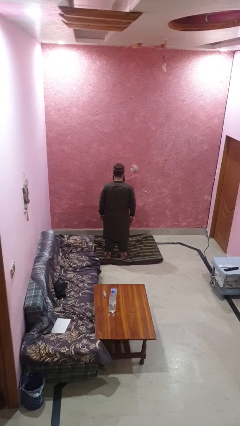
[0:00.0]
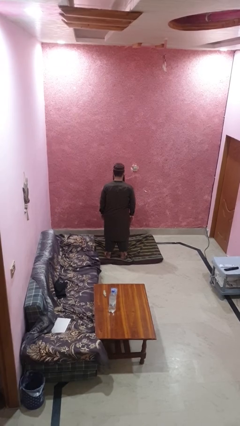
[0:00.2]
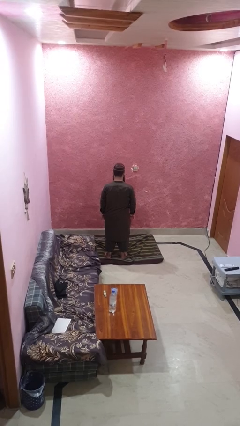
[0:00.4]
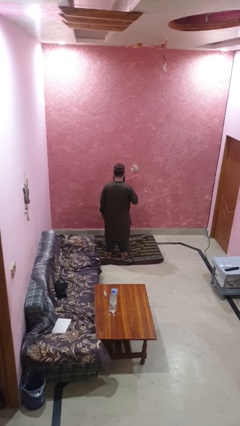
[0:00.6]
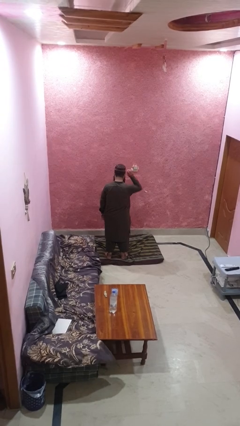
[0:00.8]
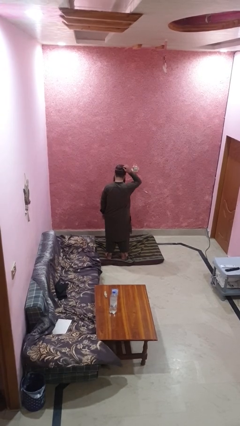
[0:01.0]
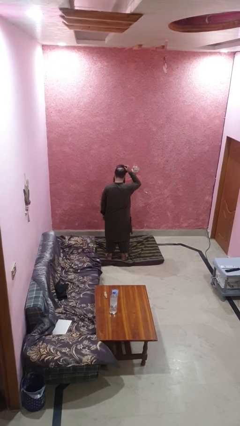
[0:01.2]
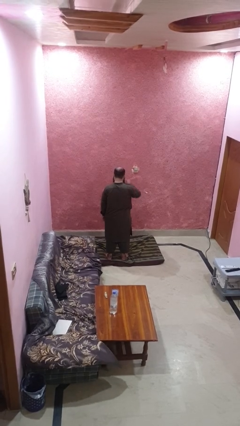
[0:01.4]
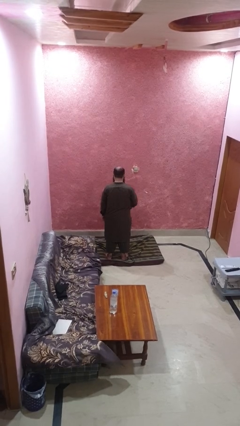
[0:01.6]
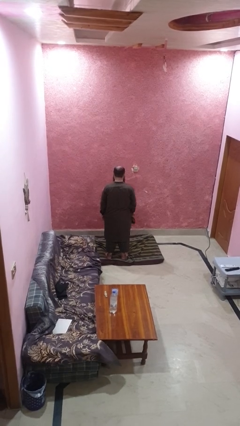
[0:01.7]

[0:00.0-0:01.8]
person takes off hat

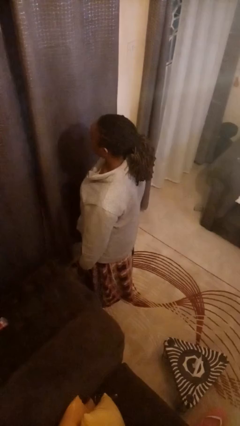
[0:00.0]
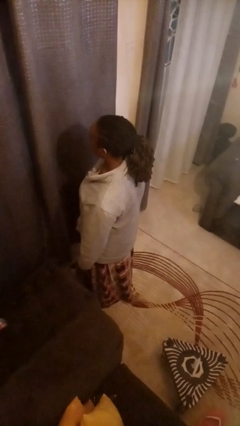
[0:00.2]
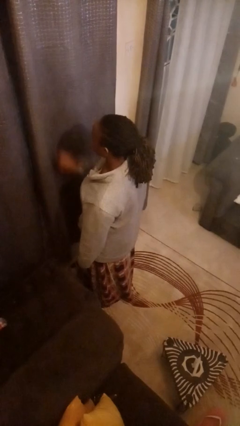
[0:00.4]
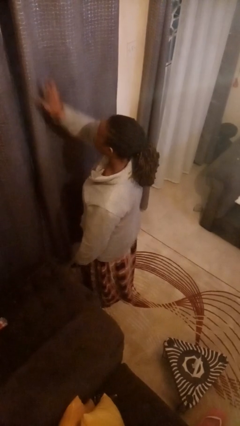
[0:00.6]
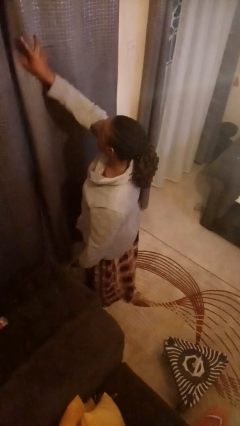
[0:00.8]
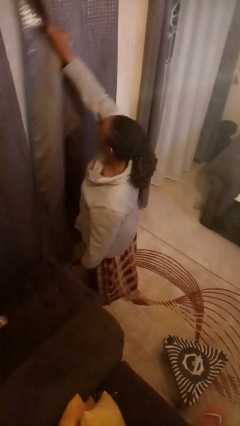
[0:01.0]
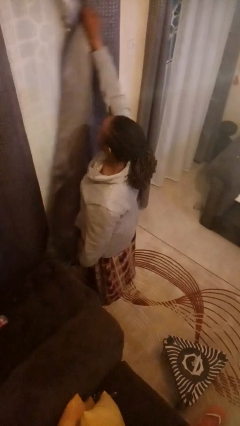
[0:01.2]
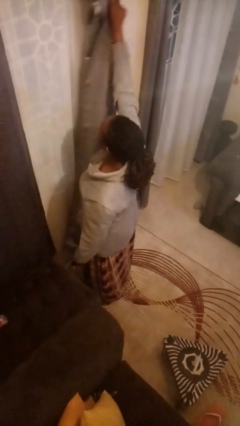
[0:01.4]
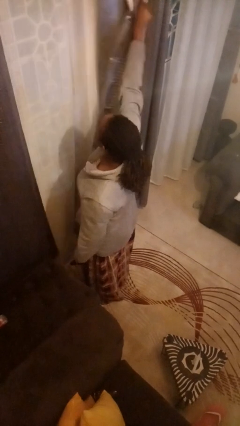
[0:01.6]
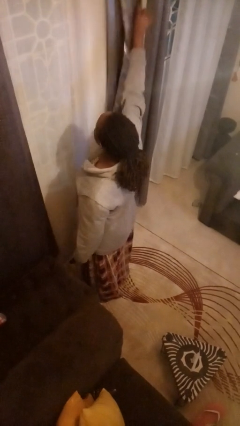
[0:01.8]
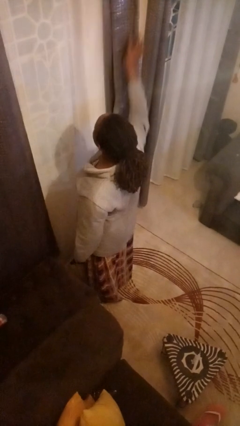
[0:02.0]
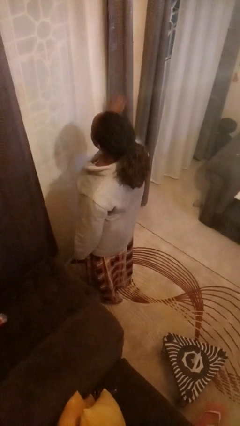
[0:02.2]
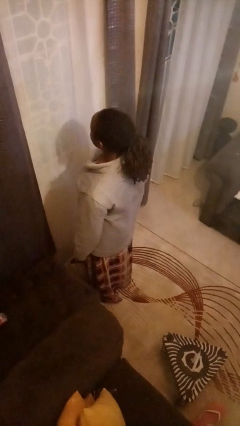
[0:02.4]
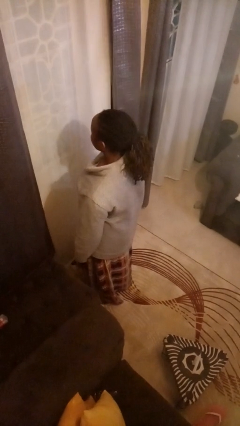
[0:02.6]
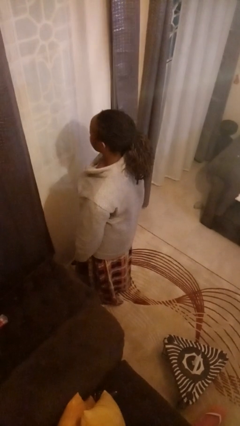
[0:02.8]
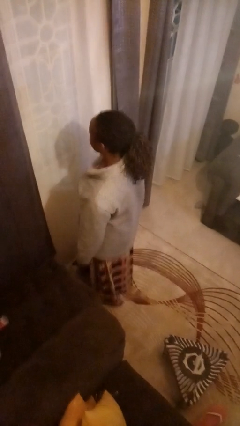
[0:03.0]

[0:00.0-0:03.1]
person opens curtains

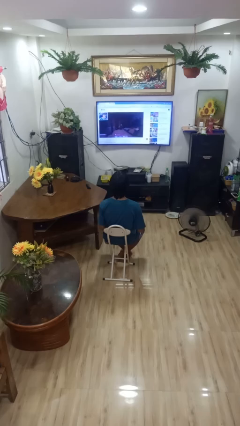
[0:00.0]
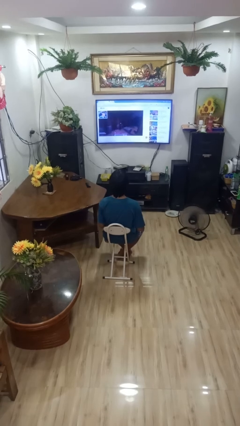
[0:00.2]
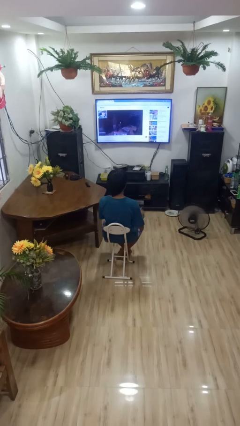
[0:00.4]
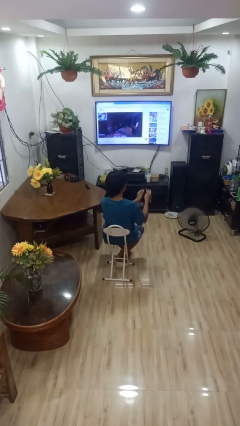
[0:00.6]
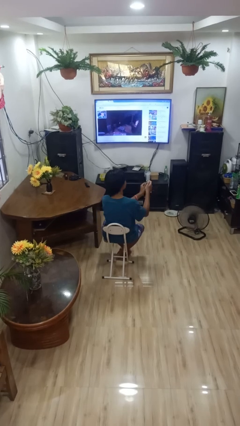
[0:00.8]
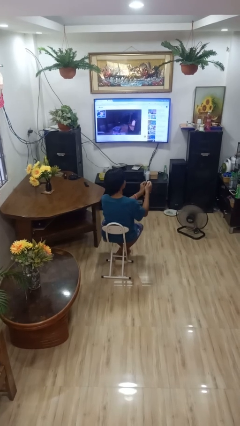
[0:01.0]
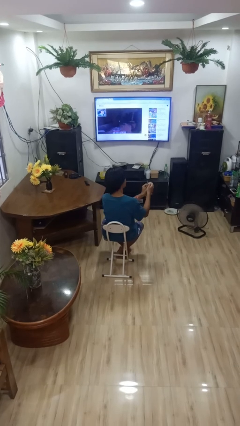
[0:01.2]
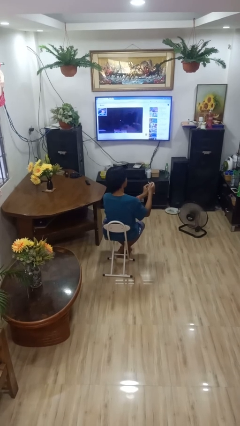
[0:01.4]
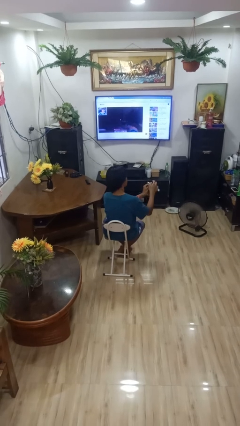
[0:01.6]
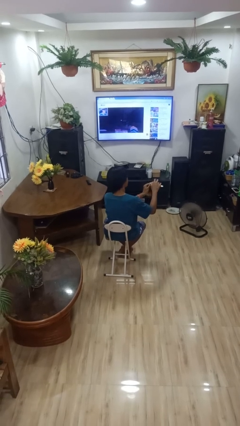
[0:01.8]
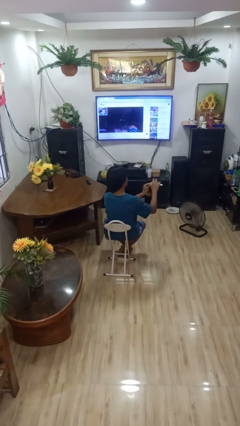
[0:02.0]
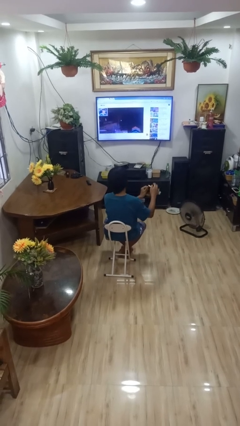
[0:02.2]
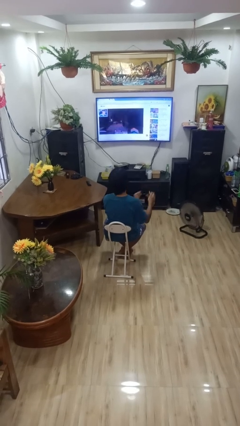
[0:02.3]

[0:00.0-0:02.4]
person files fingernails

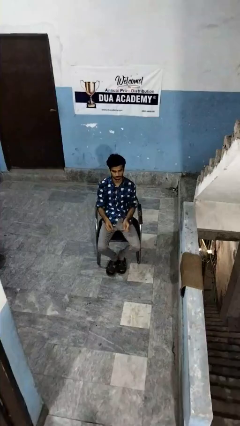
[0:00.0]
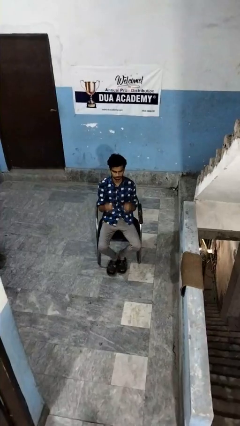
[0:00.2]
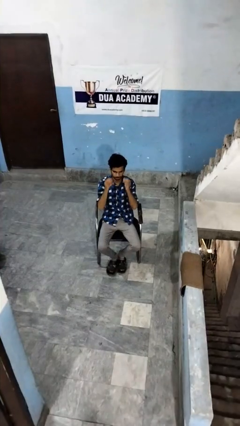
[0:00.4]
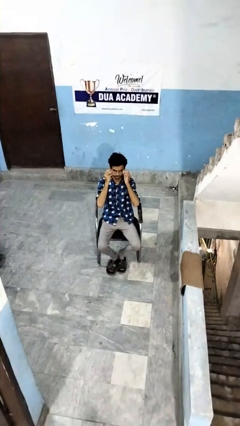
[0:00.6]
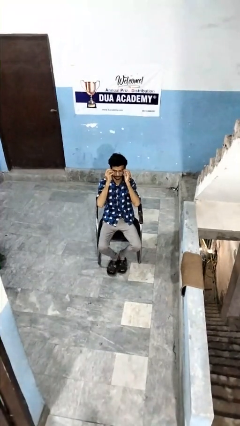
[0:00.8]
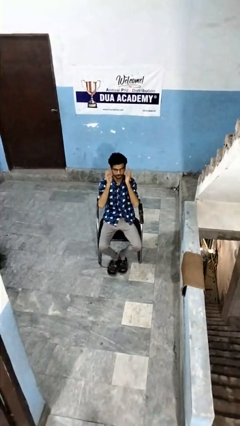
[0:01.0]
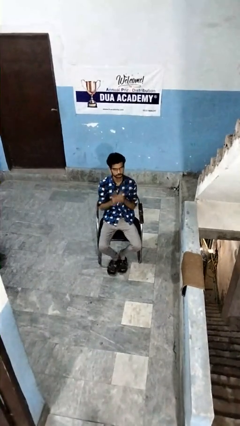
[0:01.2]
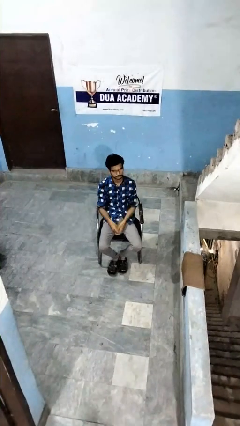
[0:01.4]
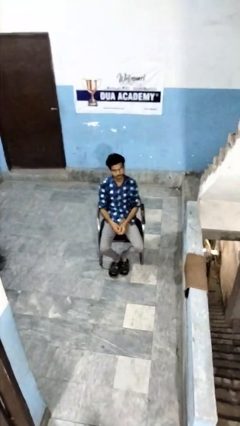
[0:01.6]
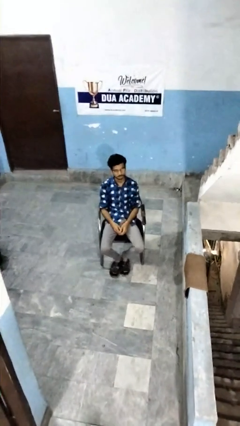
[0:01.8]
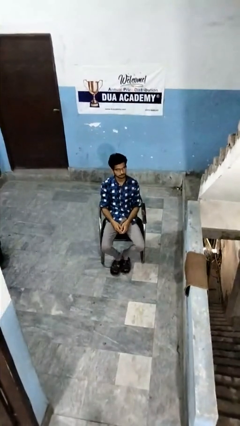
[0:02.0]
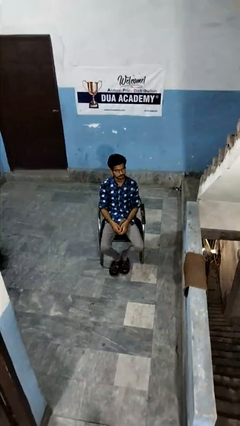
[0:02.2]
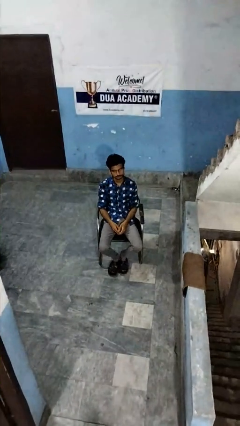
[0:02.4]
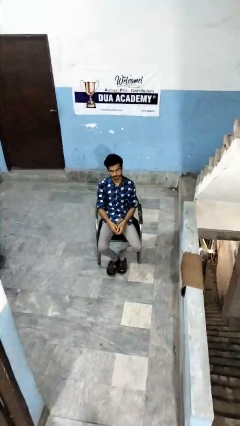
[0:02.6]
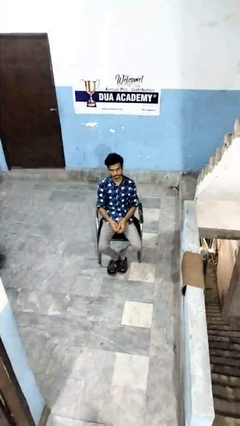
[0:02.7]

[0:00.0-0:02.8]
person puts on glasses

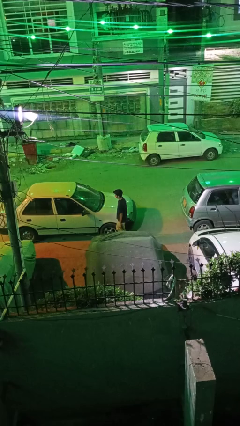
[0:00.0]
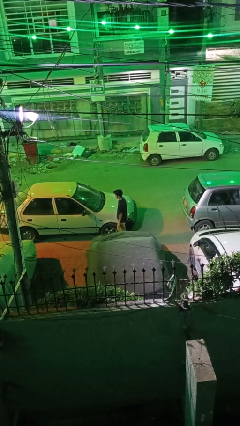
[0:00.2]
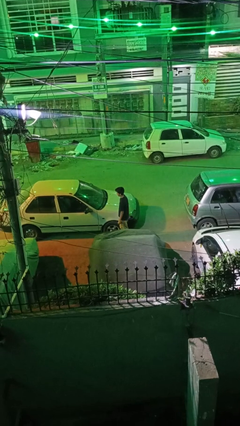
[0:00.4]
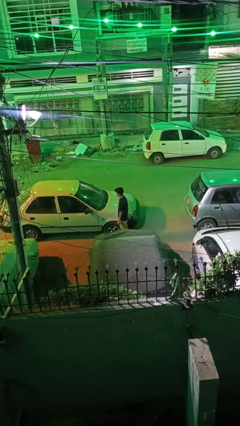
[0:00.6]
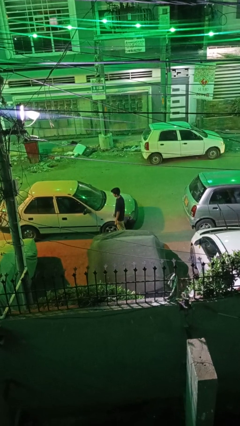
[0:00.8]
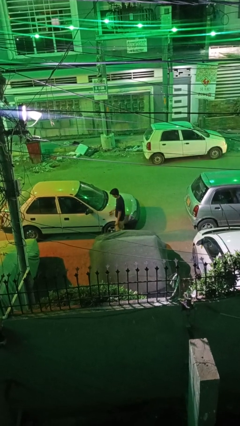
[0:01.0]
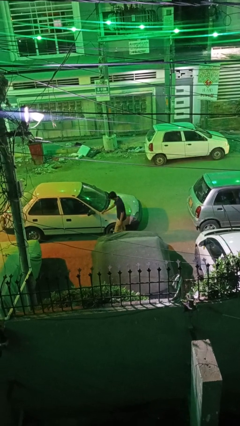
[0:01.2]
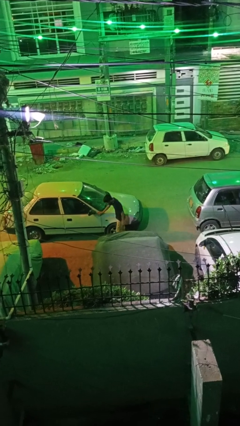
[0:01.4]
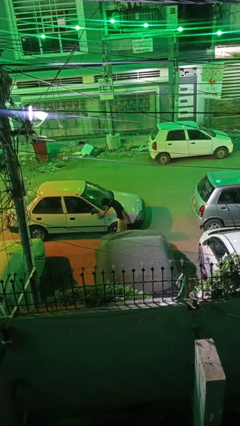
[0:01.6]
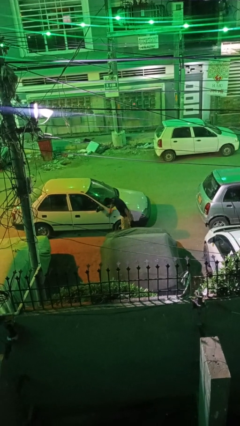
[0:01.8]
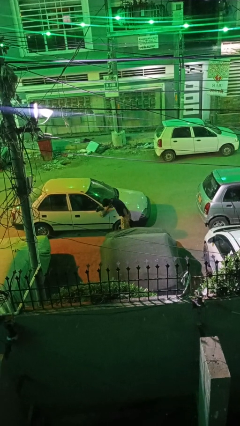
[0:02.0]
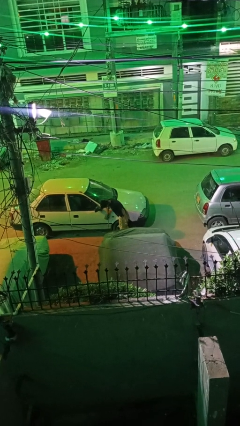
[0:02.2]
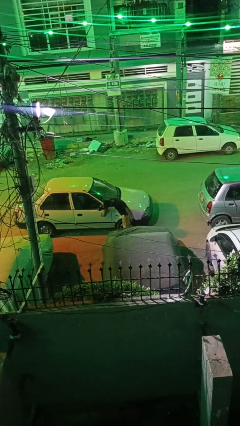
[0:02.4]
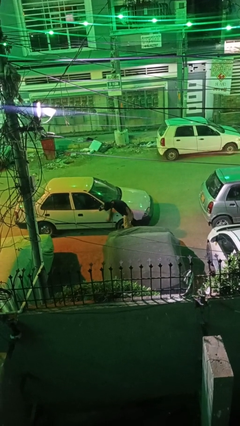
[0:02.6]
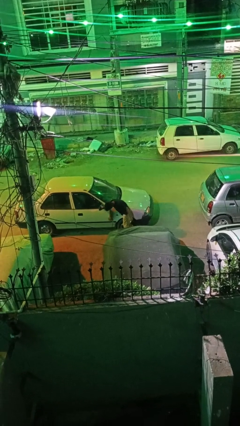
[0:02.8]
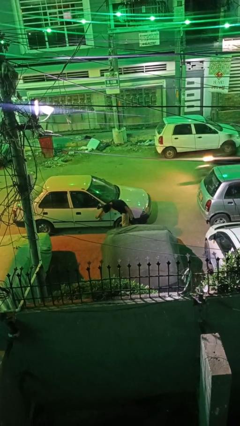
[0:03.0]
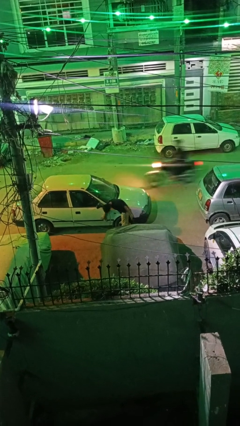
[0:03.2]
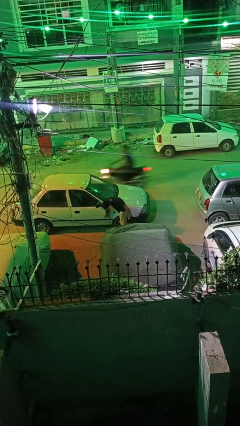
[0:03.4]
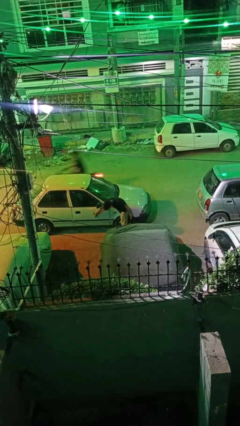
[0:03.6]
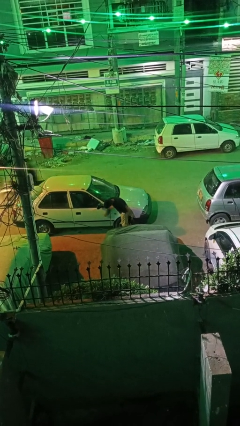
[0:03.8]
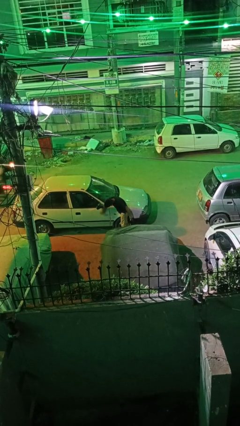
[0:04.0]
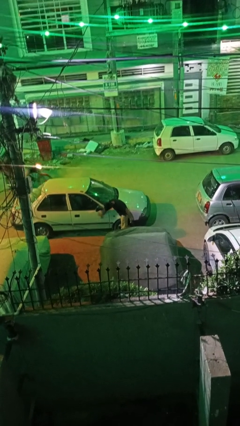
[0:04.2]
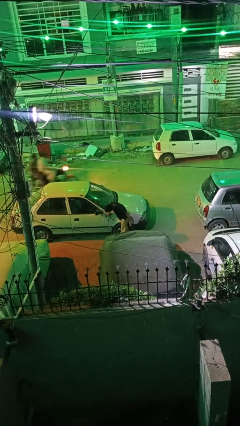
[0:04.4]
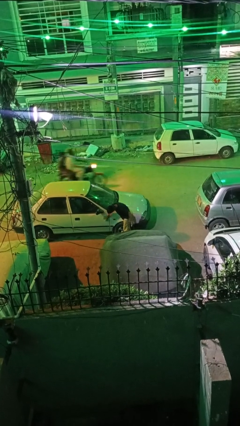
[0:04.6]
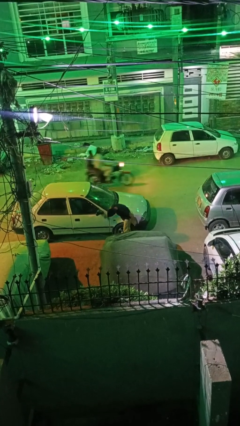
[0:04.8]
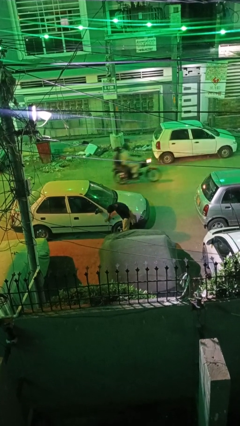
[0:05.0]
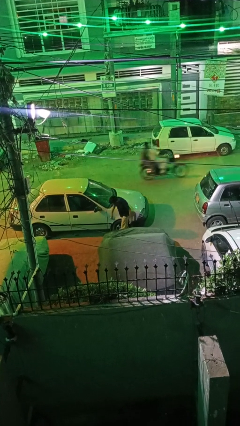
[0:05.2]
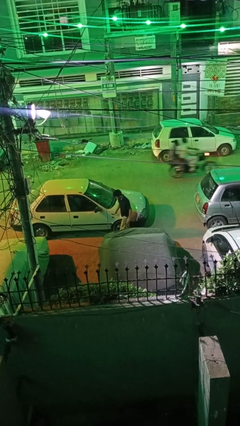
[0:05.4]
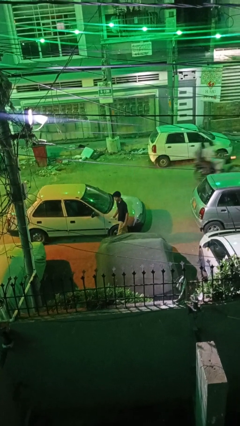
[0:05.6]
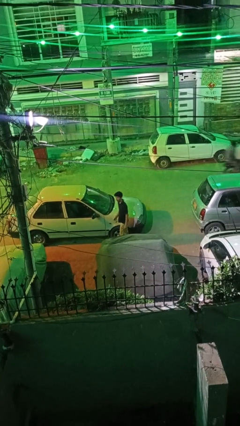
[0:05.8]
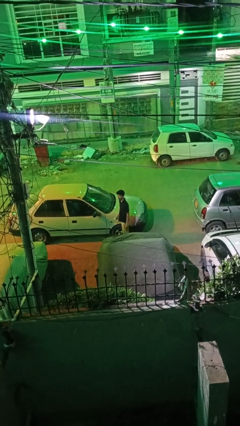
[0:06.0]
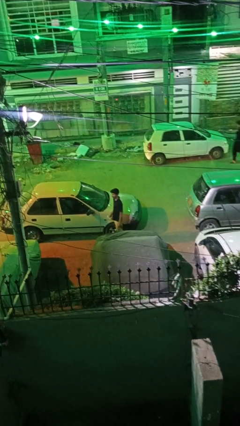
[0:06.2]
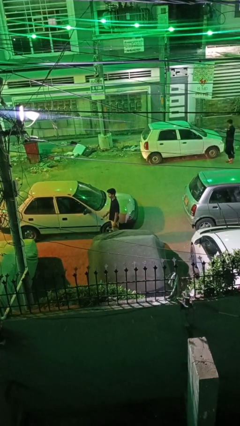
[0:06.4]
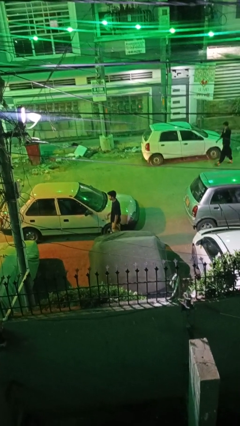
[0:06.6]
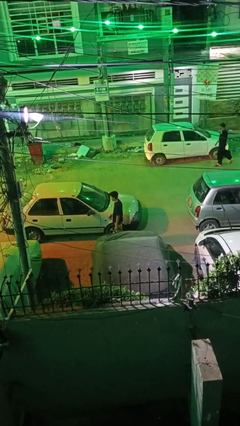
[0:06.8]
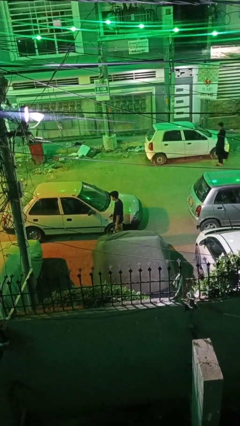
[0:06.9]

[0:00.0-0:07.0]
person polishes car with rag

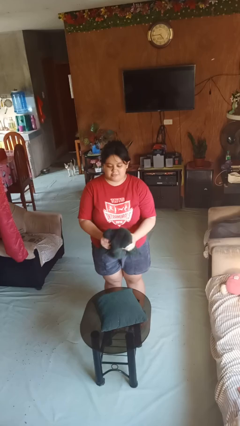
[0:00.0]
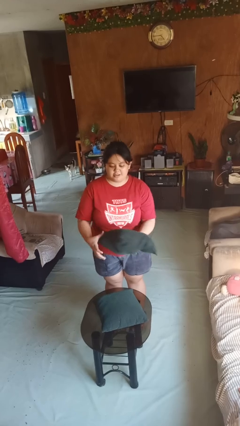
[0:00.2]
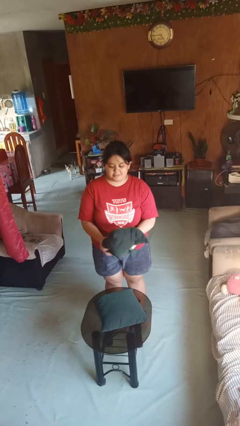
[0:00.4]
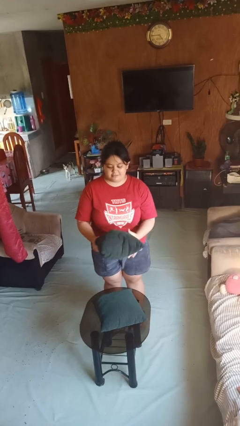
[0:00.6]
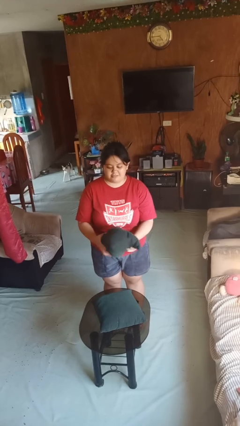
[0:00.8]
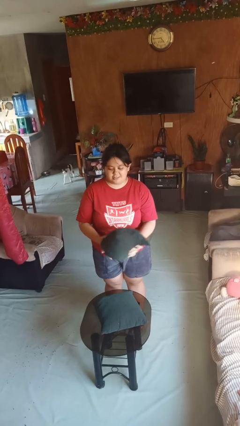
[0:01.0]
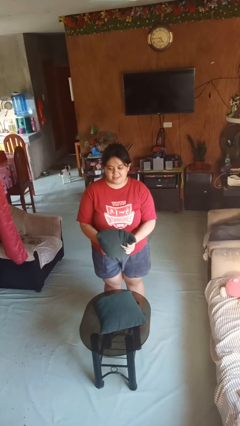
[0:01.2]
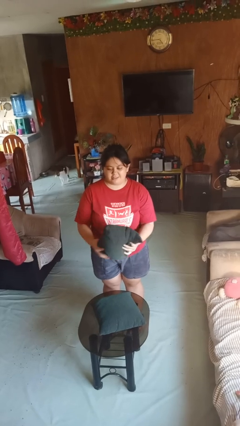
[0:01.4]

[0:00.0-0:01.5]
person squeezes object
